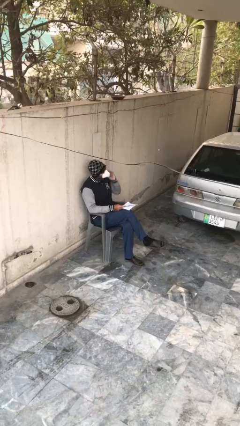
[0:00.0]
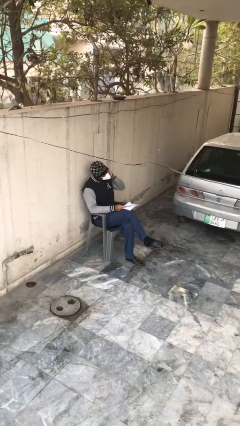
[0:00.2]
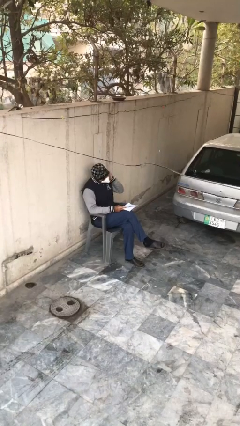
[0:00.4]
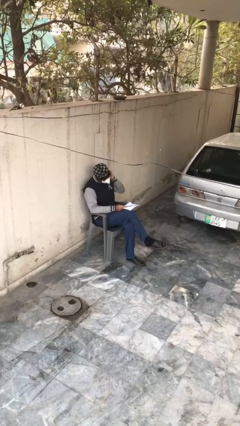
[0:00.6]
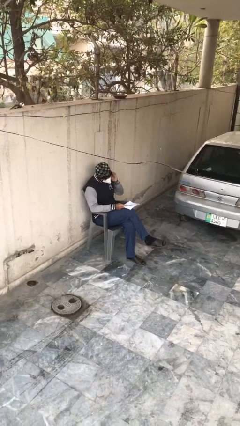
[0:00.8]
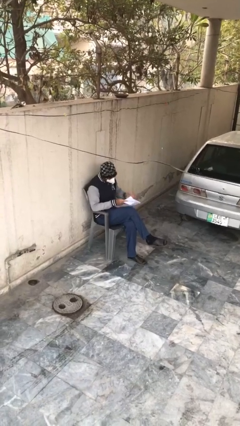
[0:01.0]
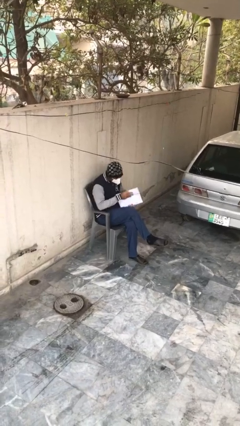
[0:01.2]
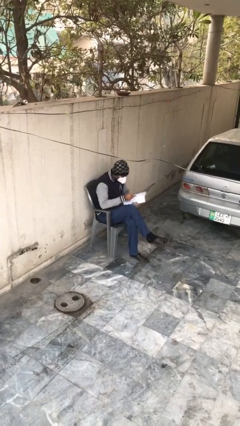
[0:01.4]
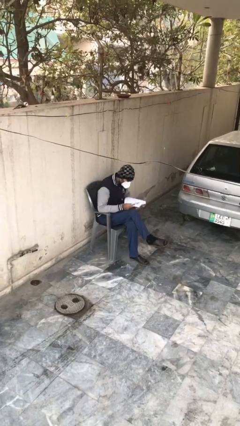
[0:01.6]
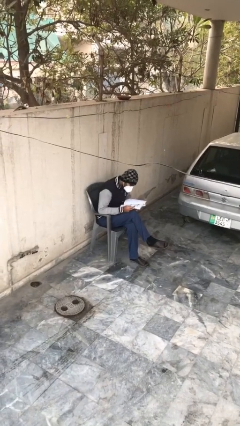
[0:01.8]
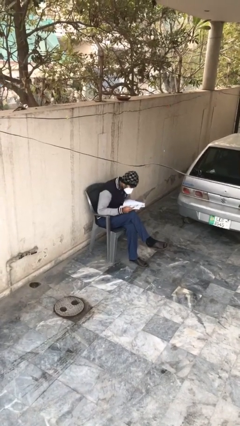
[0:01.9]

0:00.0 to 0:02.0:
person reads document

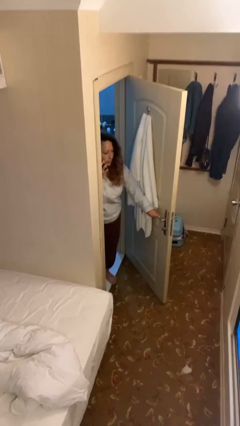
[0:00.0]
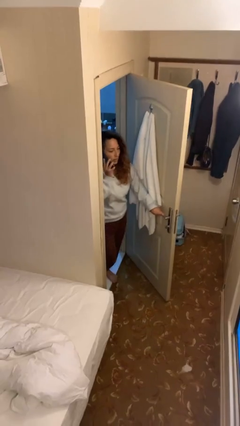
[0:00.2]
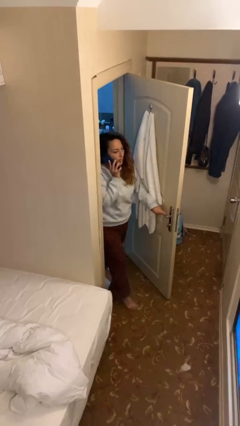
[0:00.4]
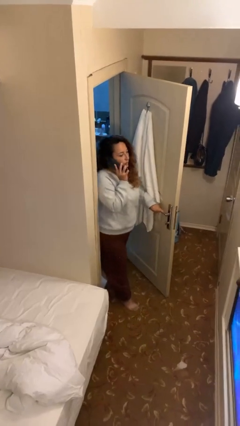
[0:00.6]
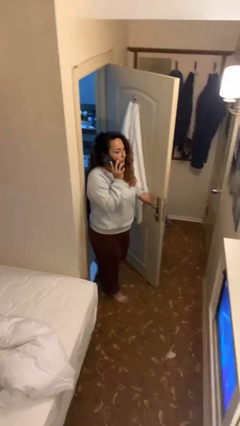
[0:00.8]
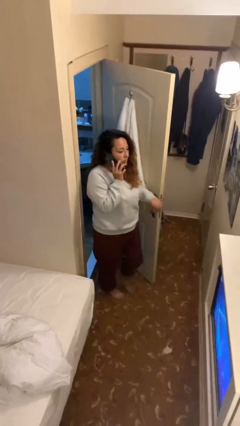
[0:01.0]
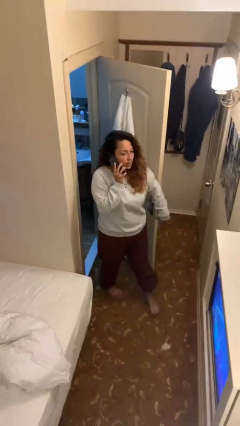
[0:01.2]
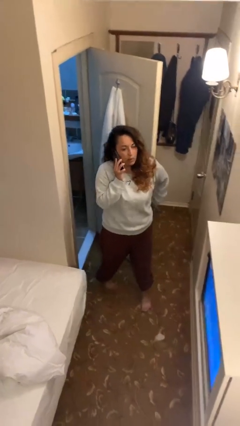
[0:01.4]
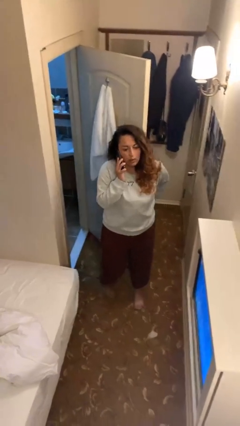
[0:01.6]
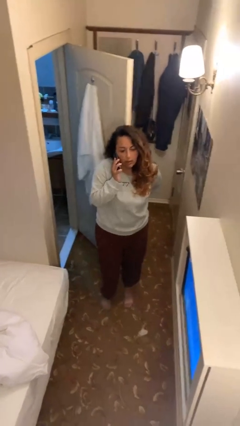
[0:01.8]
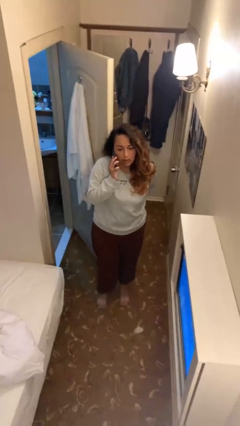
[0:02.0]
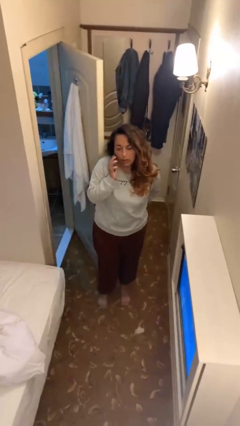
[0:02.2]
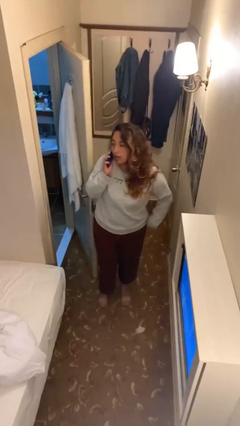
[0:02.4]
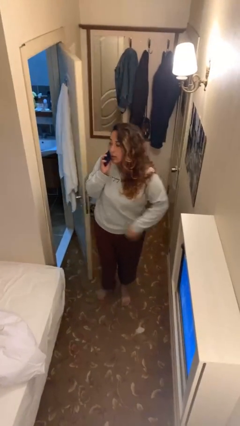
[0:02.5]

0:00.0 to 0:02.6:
person enters scene through structure

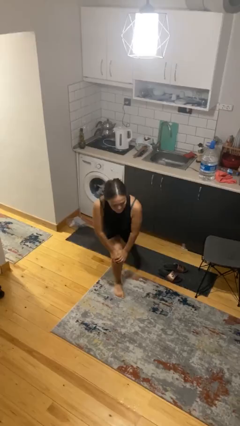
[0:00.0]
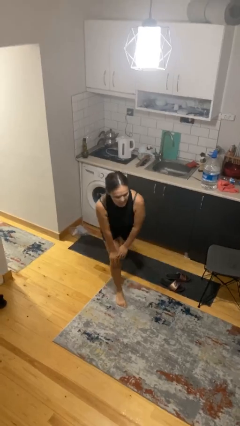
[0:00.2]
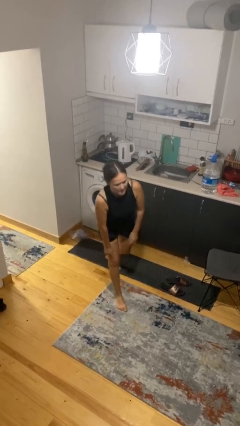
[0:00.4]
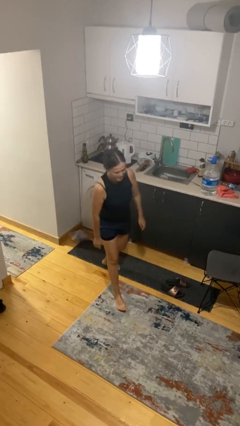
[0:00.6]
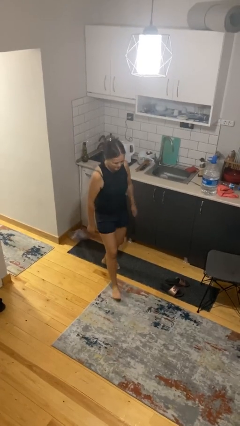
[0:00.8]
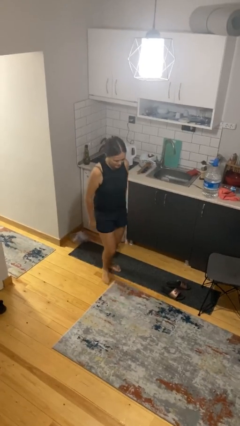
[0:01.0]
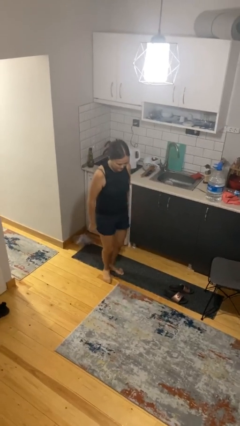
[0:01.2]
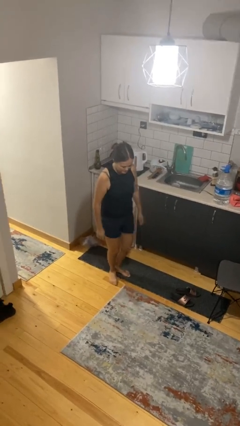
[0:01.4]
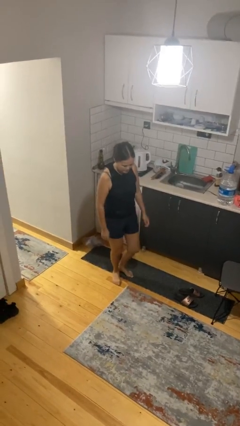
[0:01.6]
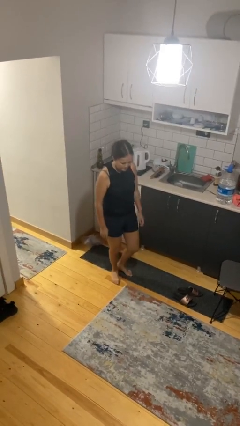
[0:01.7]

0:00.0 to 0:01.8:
person stands up from floor

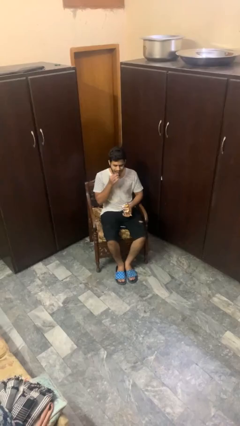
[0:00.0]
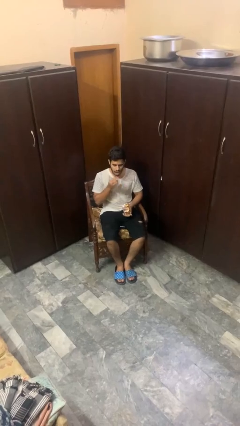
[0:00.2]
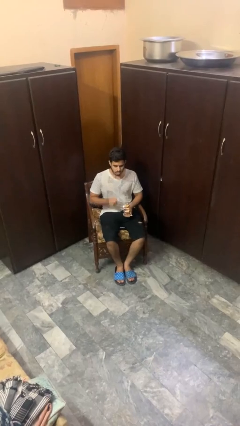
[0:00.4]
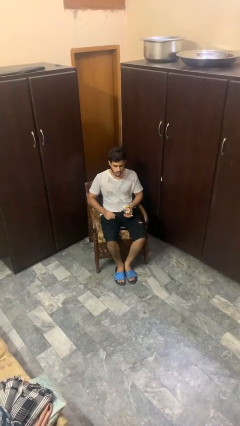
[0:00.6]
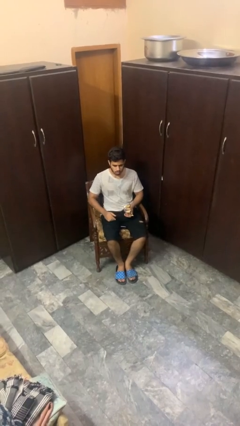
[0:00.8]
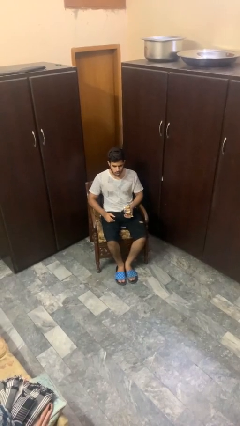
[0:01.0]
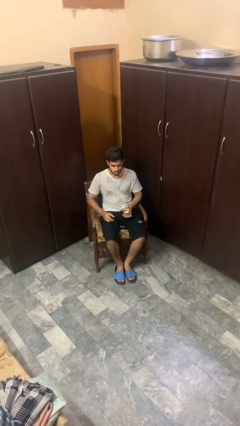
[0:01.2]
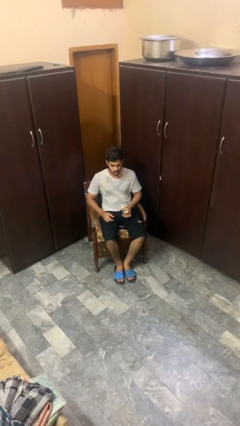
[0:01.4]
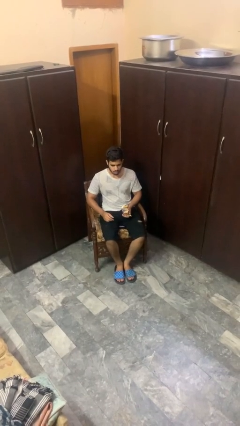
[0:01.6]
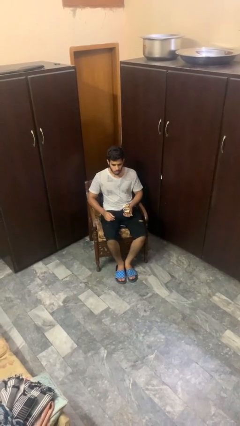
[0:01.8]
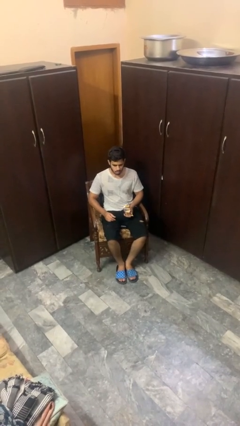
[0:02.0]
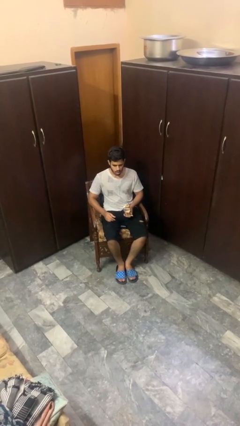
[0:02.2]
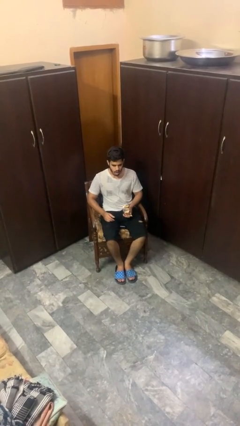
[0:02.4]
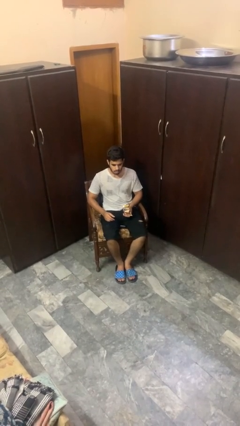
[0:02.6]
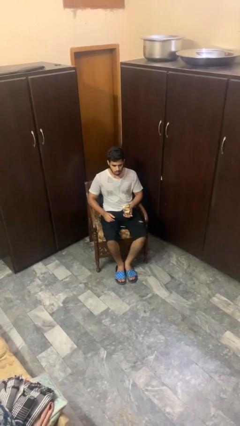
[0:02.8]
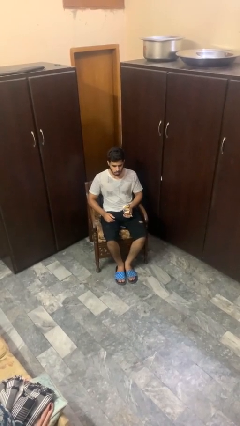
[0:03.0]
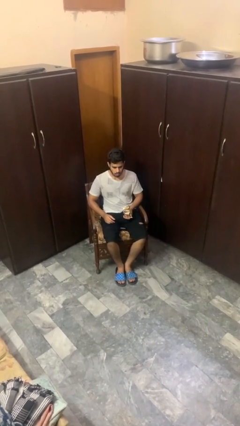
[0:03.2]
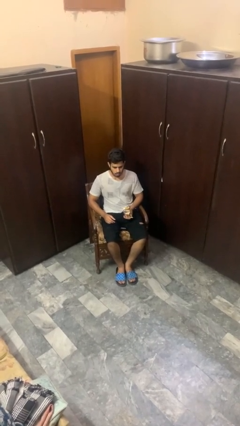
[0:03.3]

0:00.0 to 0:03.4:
person eats snack from bag

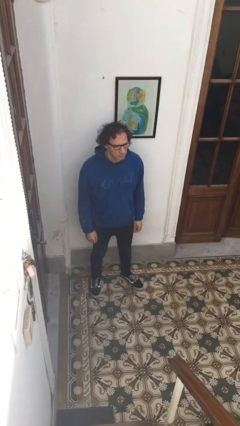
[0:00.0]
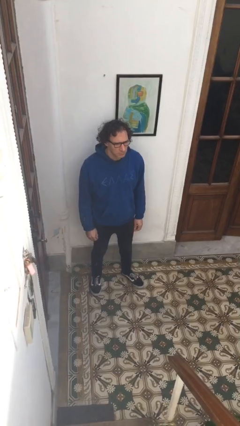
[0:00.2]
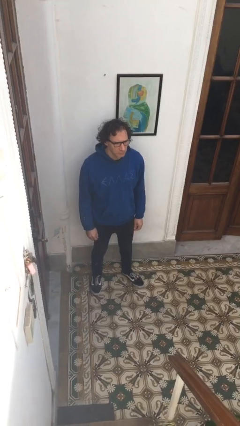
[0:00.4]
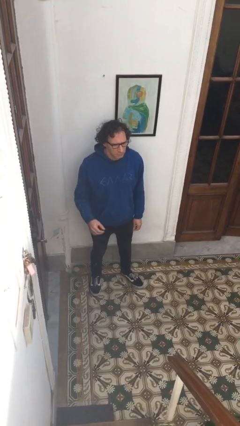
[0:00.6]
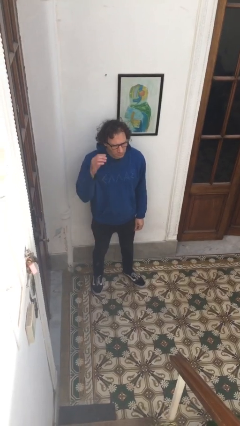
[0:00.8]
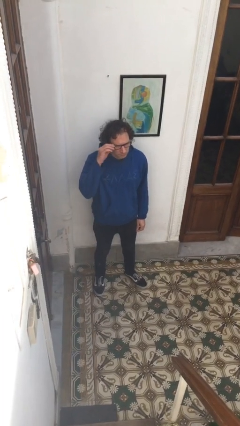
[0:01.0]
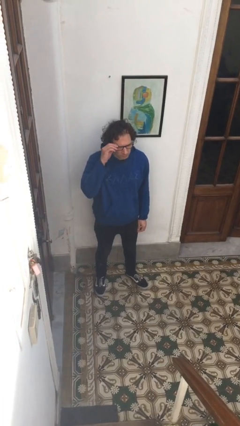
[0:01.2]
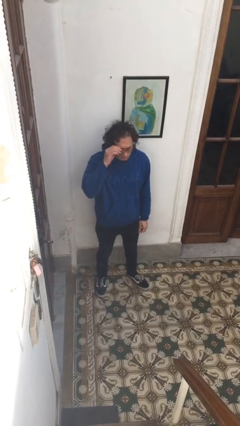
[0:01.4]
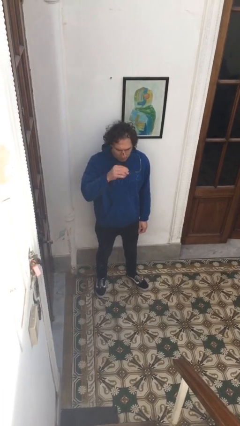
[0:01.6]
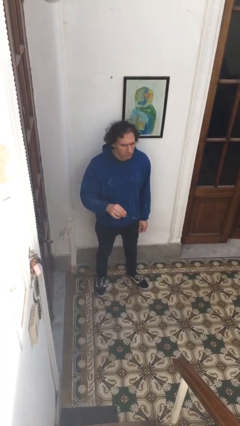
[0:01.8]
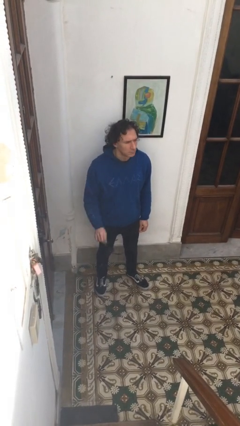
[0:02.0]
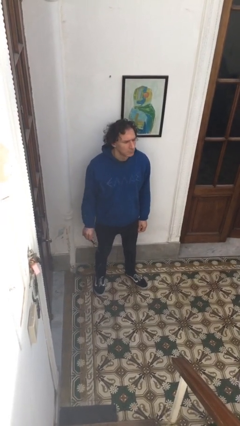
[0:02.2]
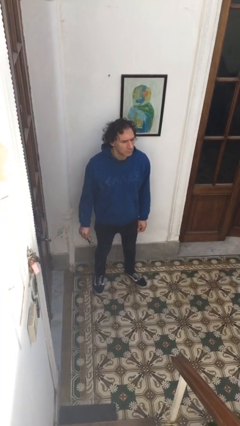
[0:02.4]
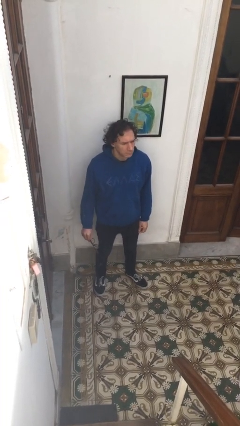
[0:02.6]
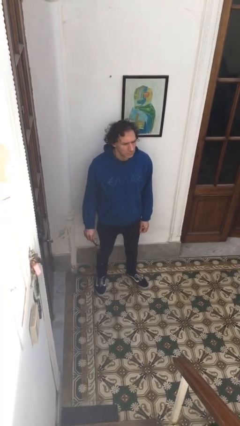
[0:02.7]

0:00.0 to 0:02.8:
person takes off glasses

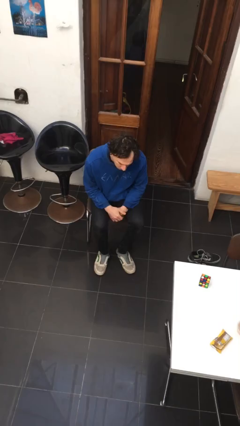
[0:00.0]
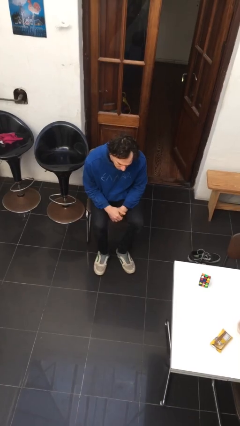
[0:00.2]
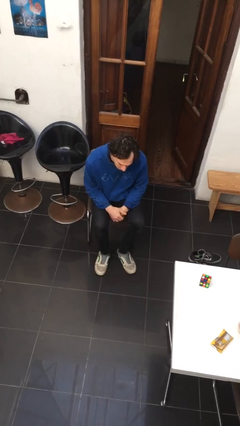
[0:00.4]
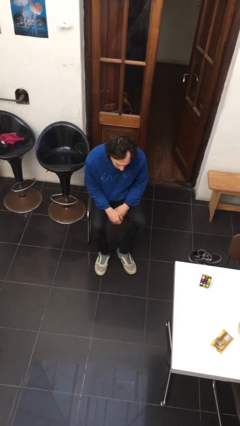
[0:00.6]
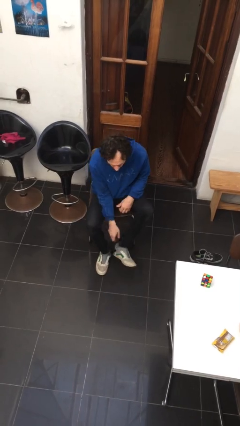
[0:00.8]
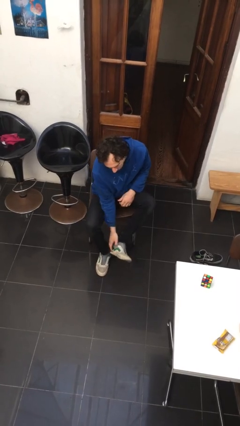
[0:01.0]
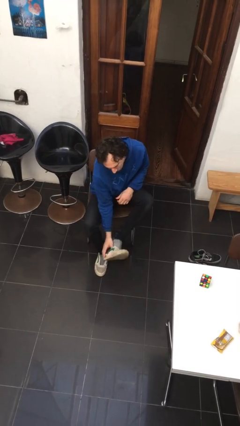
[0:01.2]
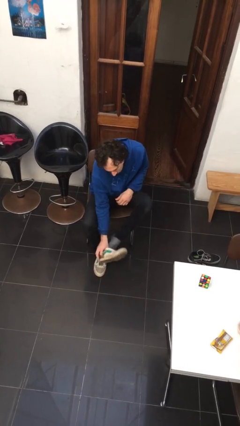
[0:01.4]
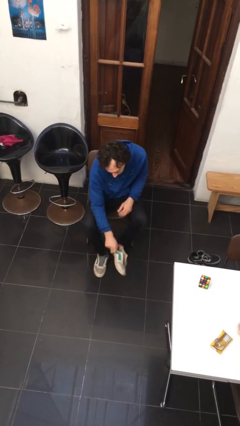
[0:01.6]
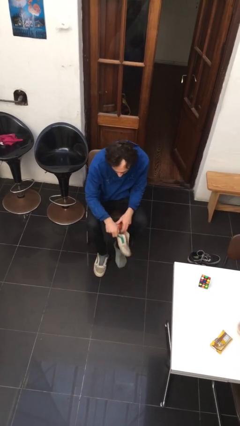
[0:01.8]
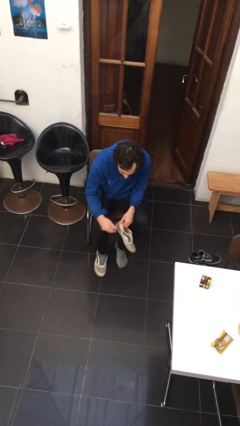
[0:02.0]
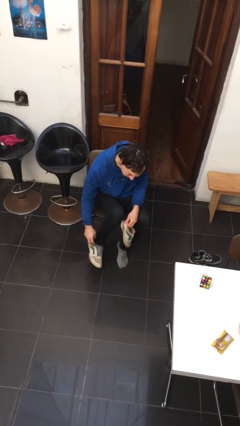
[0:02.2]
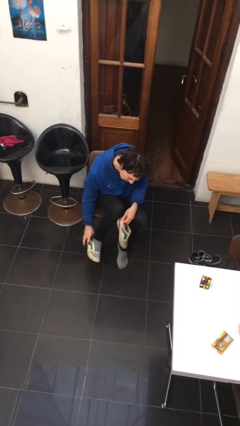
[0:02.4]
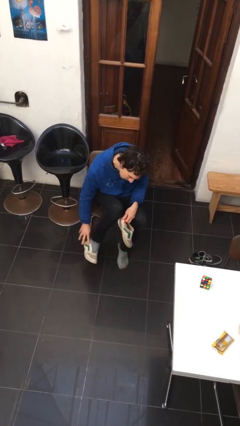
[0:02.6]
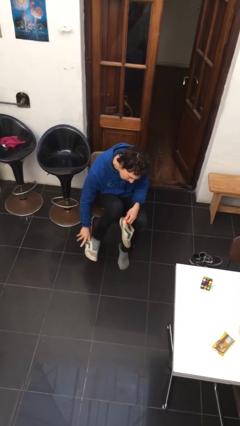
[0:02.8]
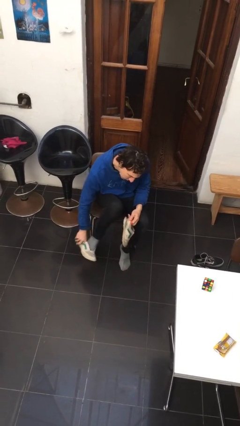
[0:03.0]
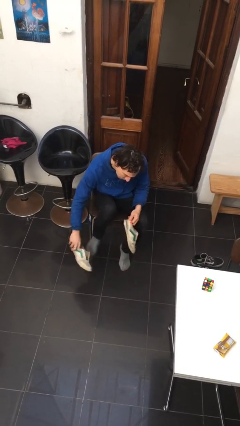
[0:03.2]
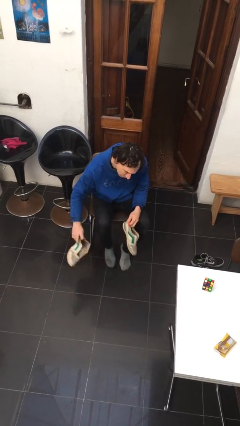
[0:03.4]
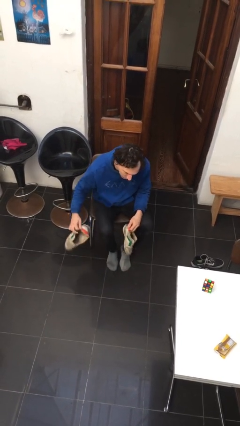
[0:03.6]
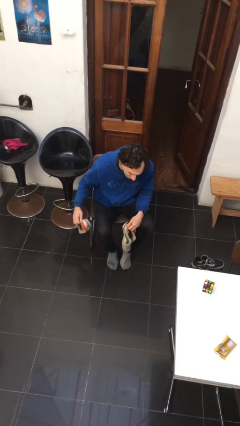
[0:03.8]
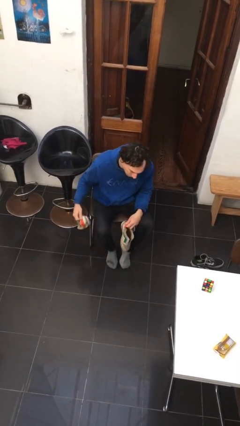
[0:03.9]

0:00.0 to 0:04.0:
person takes off shoes

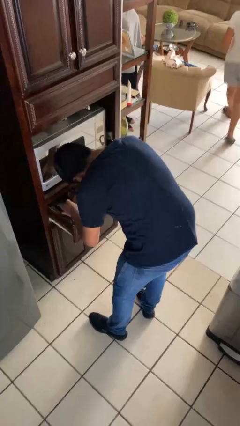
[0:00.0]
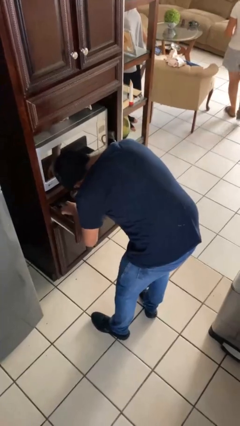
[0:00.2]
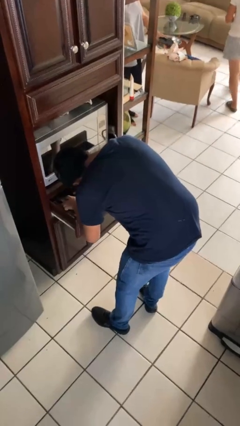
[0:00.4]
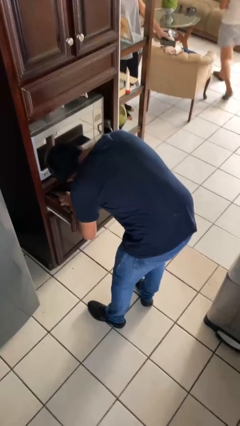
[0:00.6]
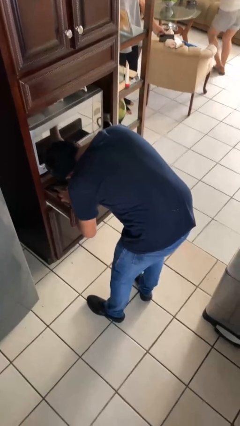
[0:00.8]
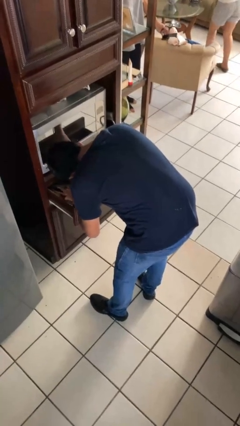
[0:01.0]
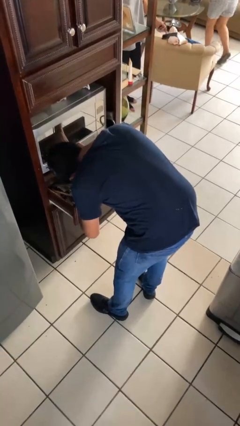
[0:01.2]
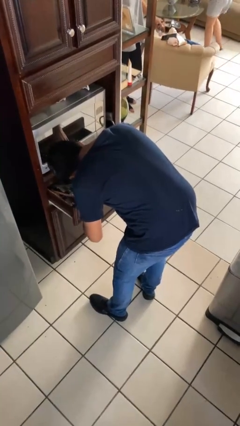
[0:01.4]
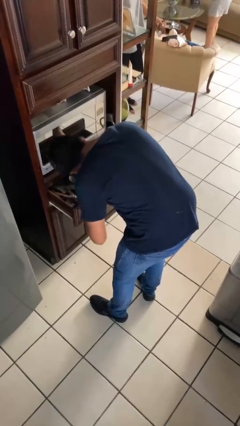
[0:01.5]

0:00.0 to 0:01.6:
person searches in kitchen drawer
